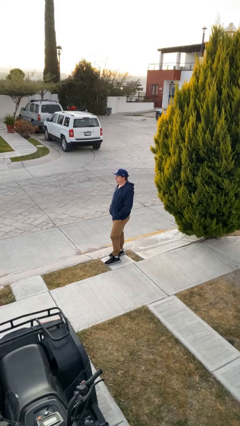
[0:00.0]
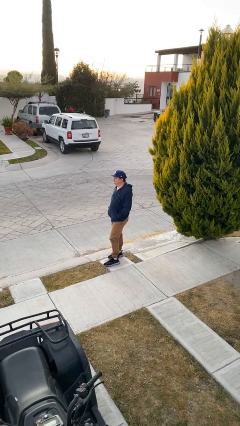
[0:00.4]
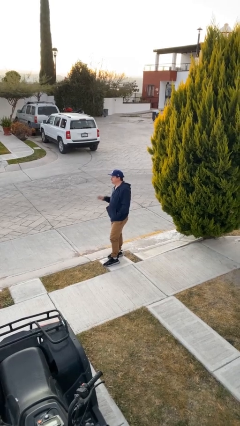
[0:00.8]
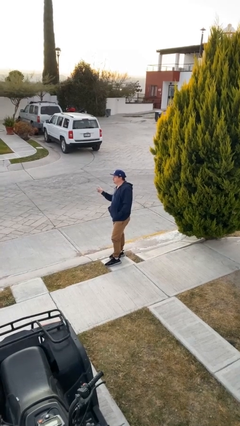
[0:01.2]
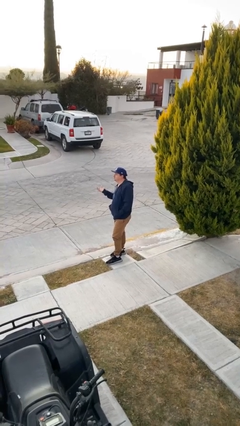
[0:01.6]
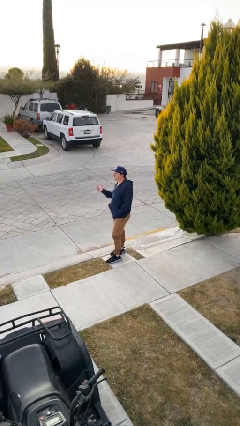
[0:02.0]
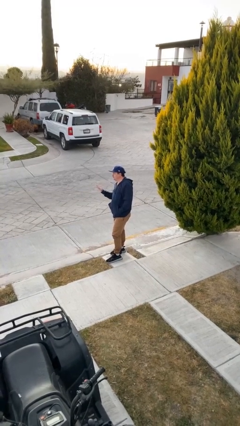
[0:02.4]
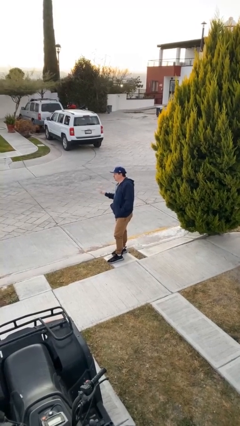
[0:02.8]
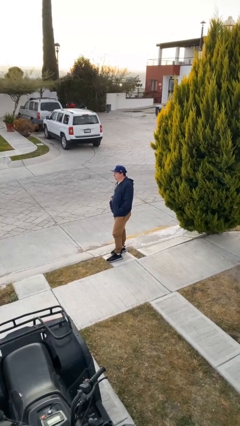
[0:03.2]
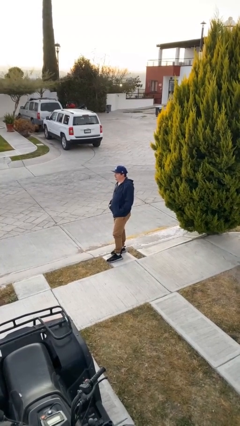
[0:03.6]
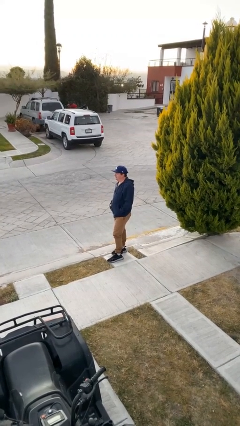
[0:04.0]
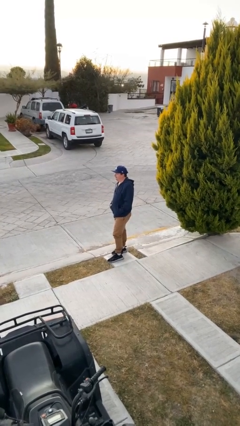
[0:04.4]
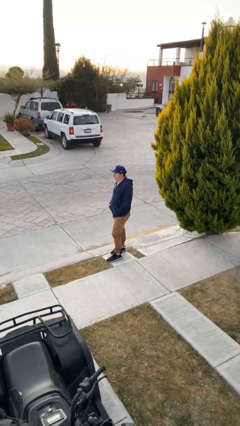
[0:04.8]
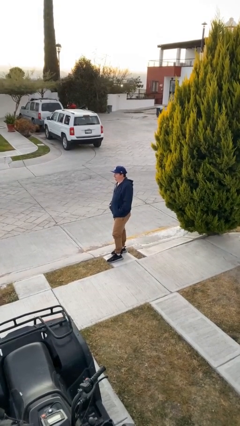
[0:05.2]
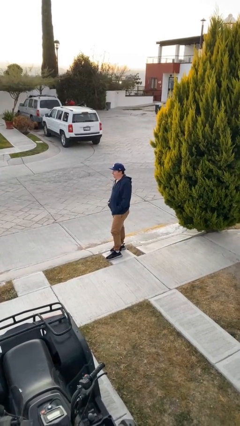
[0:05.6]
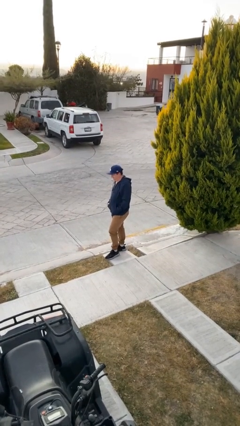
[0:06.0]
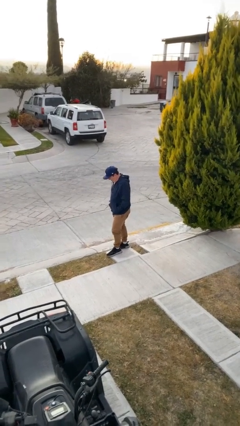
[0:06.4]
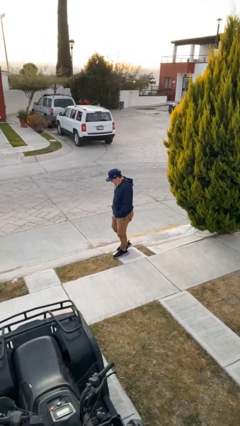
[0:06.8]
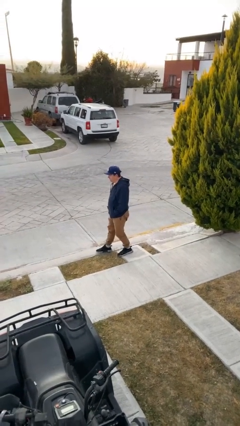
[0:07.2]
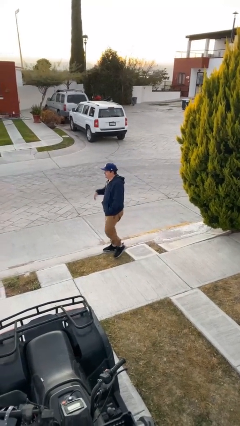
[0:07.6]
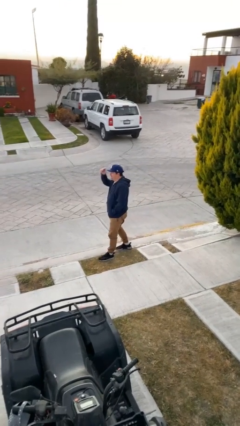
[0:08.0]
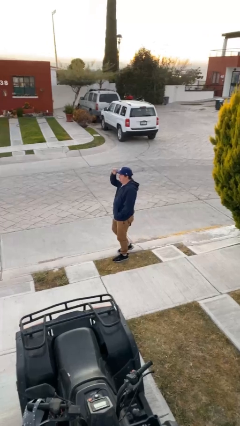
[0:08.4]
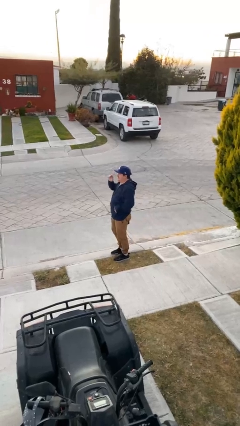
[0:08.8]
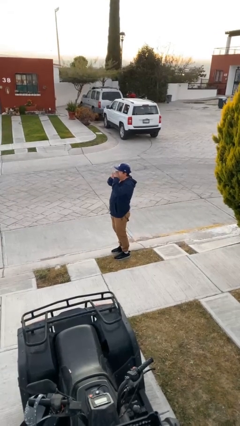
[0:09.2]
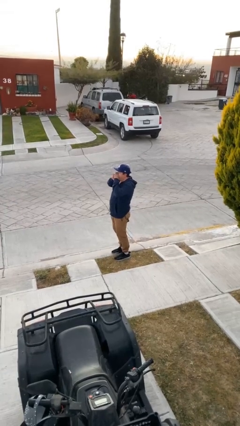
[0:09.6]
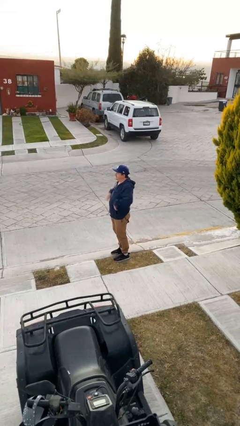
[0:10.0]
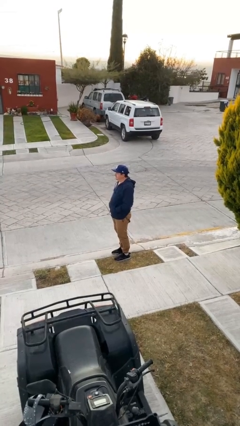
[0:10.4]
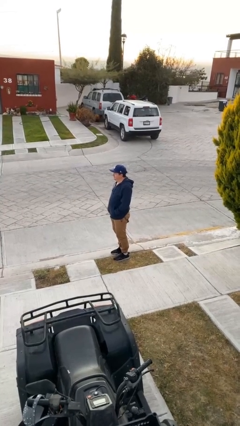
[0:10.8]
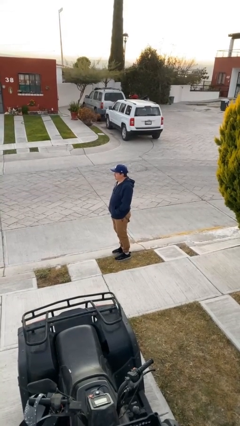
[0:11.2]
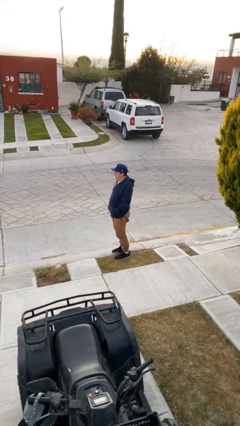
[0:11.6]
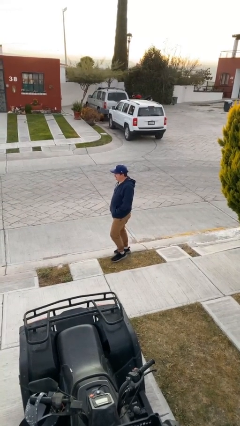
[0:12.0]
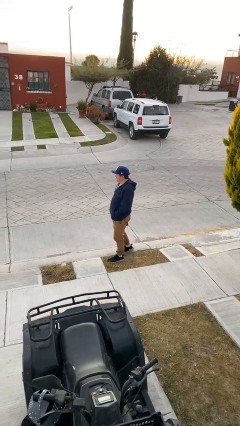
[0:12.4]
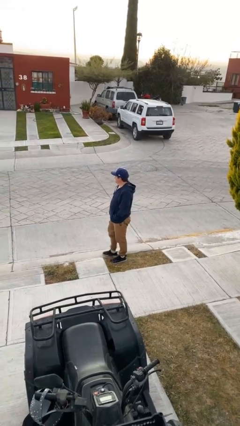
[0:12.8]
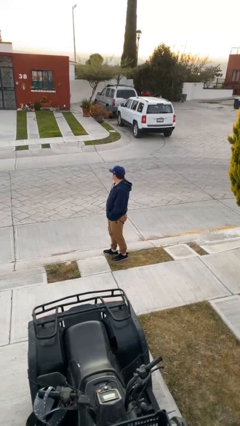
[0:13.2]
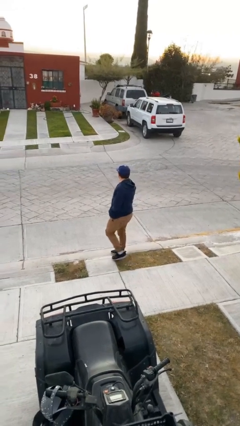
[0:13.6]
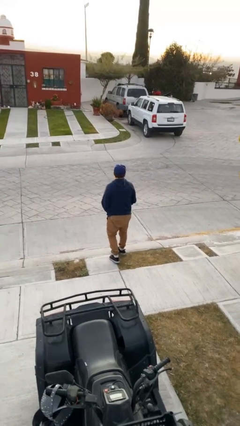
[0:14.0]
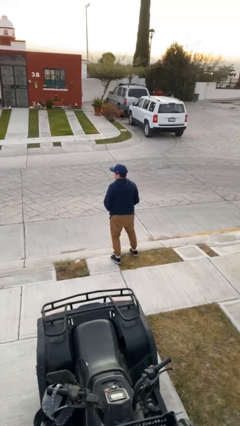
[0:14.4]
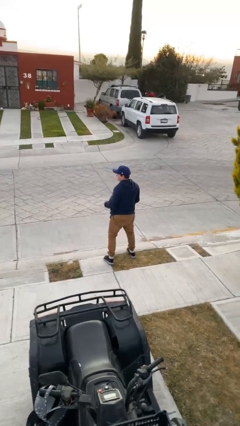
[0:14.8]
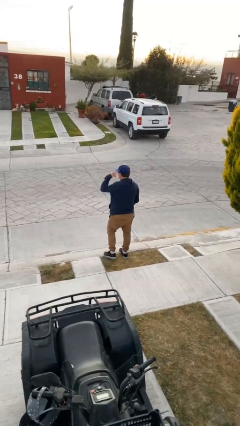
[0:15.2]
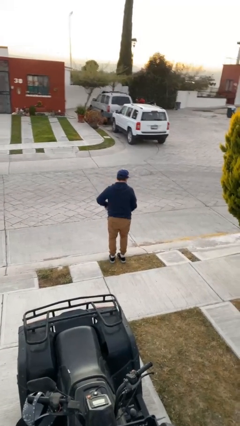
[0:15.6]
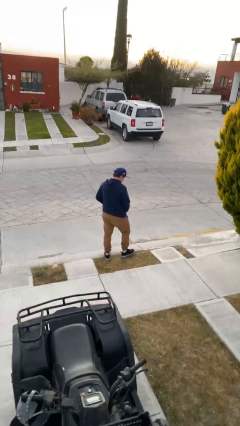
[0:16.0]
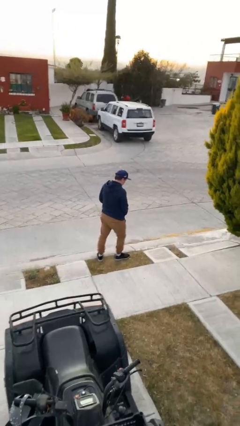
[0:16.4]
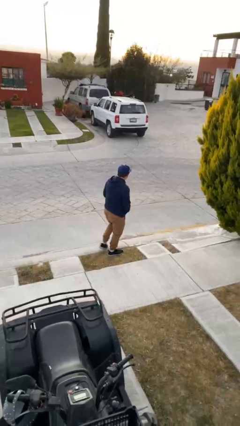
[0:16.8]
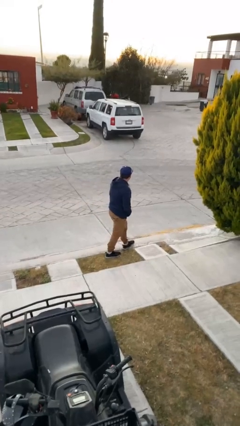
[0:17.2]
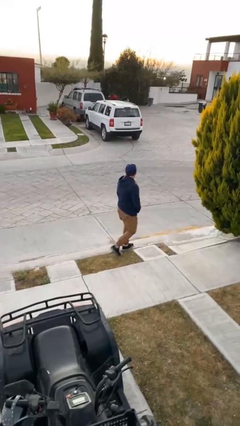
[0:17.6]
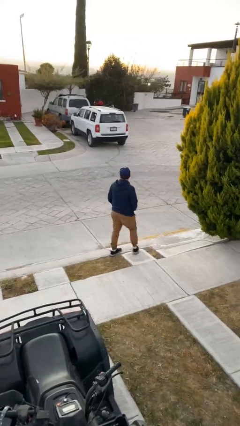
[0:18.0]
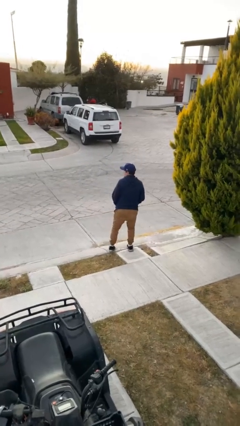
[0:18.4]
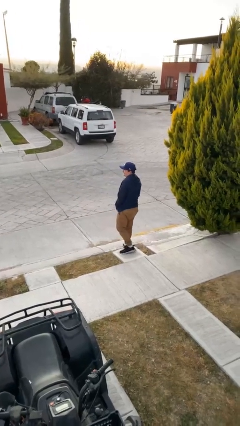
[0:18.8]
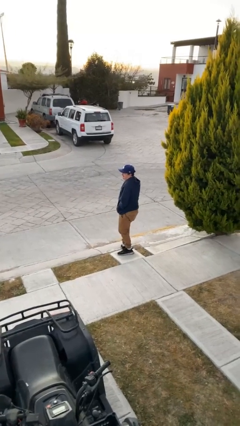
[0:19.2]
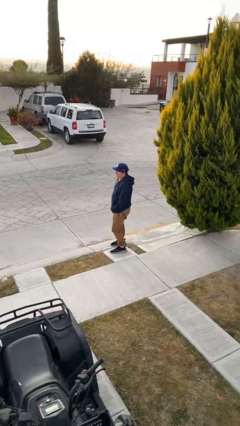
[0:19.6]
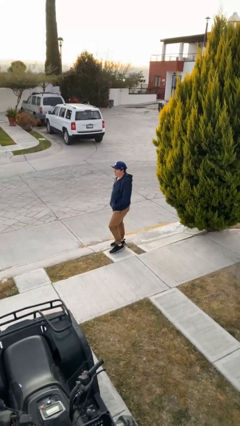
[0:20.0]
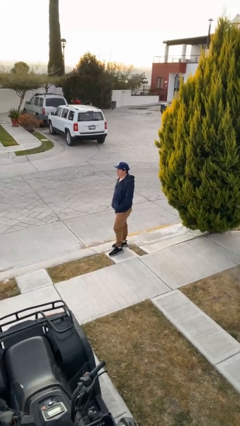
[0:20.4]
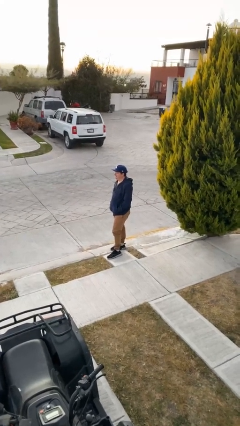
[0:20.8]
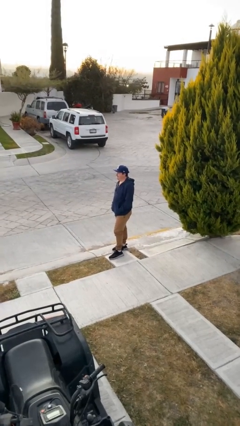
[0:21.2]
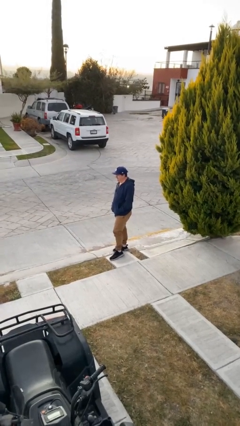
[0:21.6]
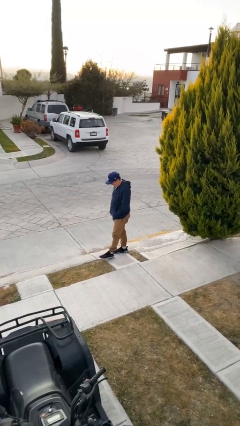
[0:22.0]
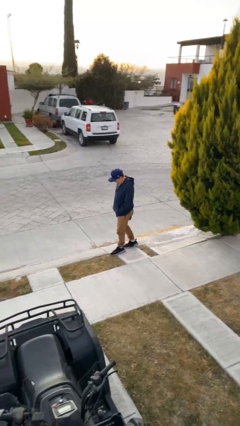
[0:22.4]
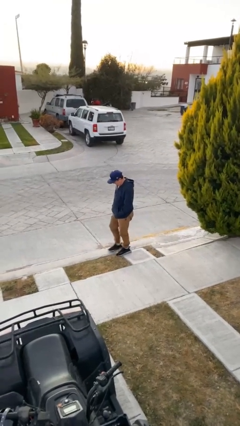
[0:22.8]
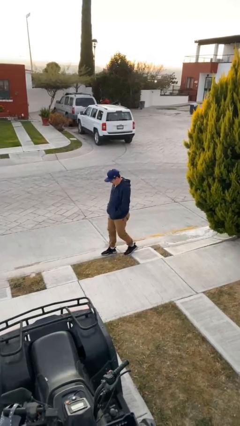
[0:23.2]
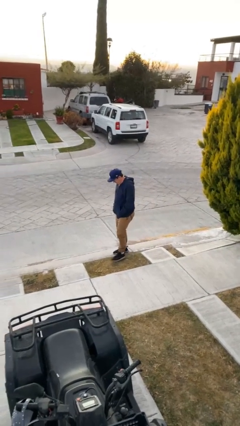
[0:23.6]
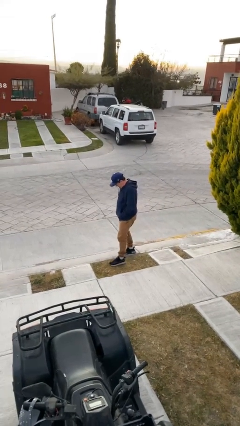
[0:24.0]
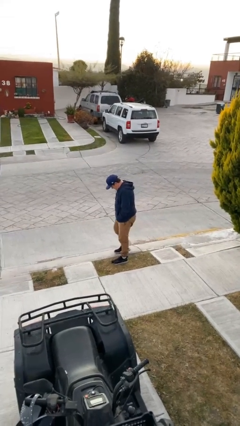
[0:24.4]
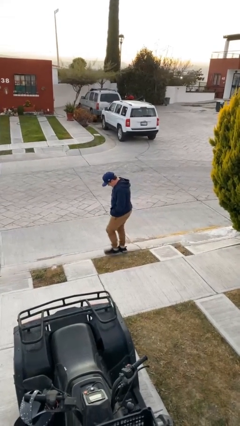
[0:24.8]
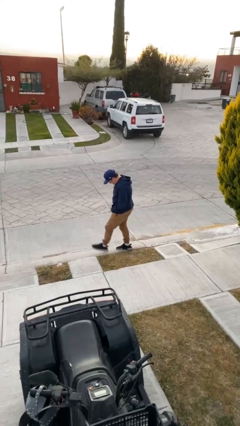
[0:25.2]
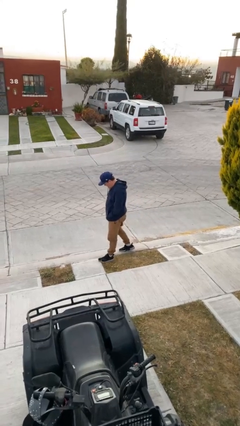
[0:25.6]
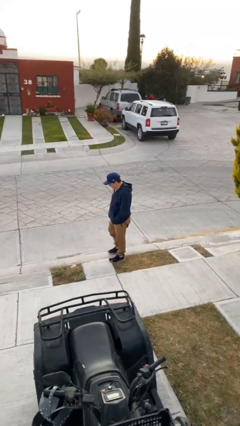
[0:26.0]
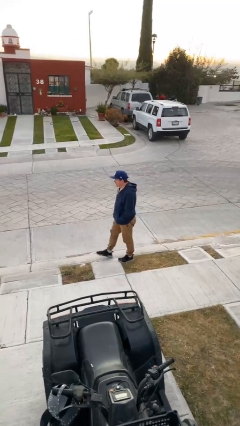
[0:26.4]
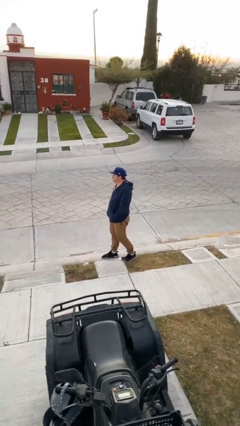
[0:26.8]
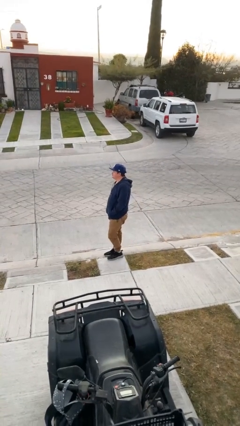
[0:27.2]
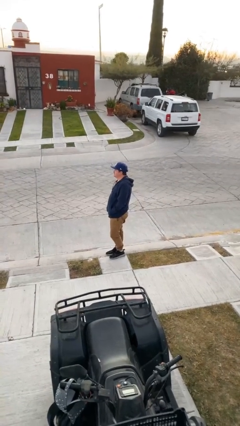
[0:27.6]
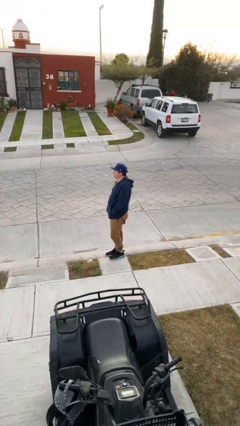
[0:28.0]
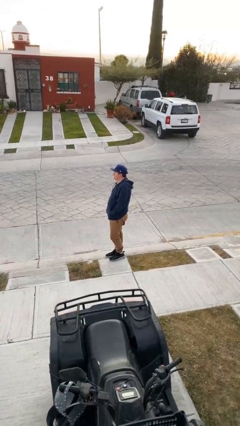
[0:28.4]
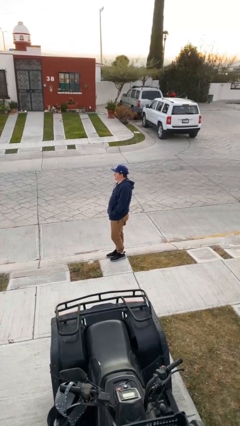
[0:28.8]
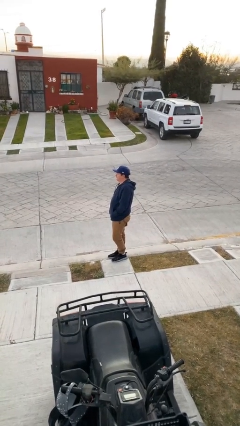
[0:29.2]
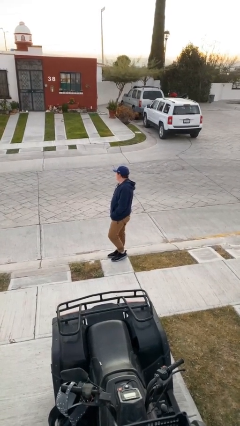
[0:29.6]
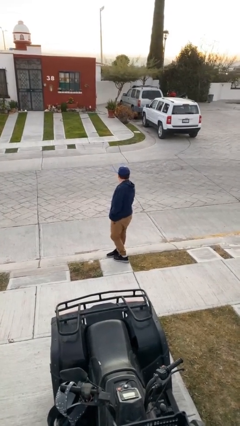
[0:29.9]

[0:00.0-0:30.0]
person walks

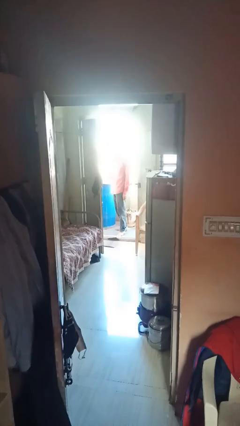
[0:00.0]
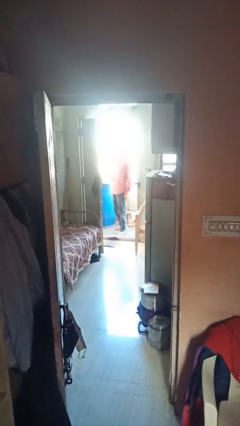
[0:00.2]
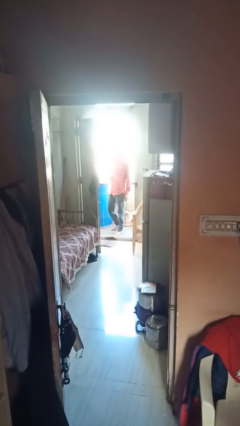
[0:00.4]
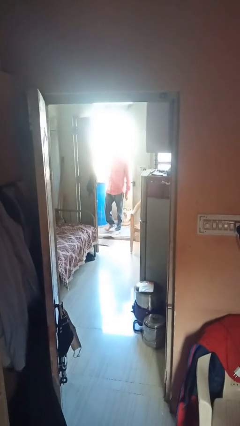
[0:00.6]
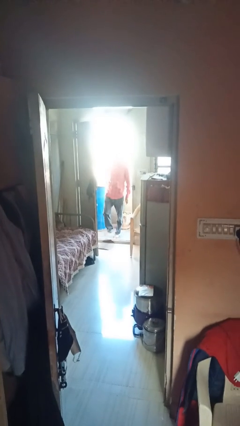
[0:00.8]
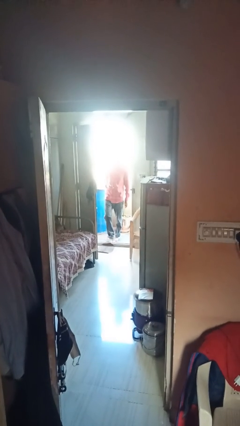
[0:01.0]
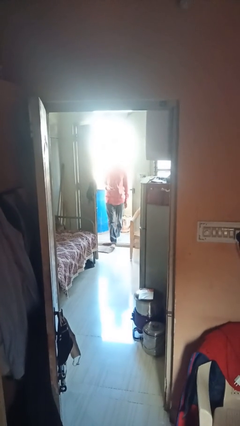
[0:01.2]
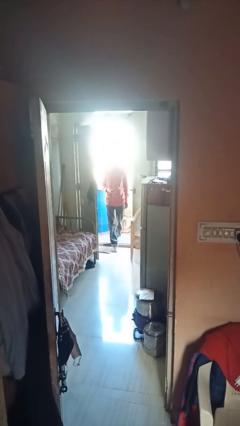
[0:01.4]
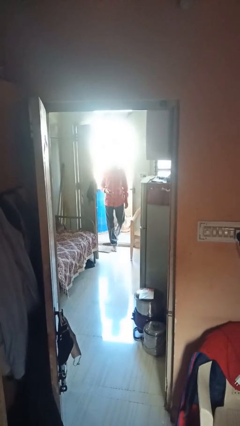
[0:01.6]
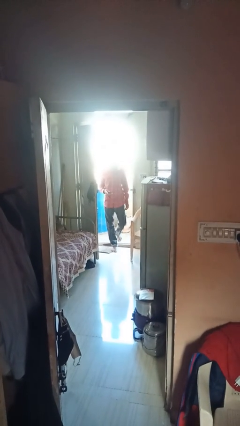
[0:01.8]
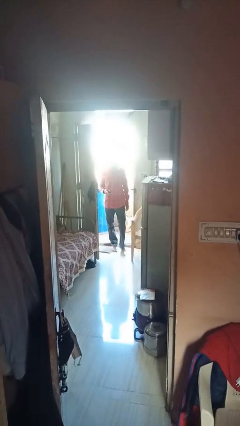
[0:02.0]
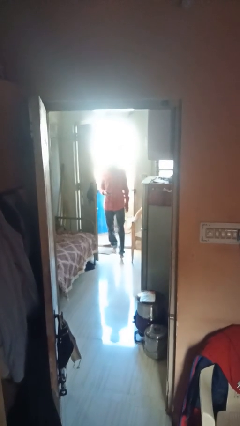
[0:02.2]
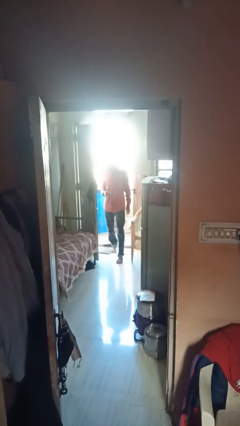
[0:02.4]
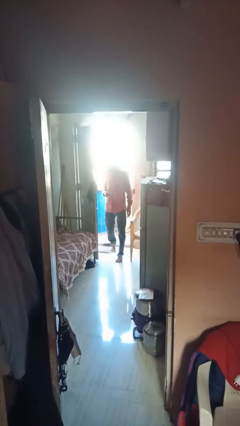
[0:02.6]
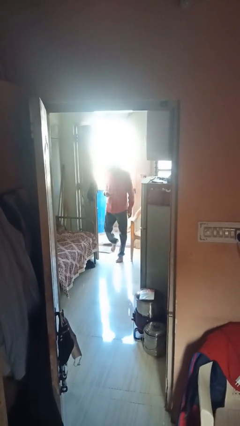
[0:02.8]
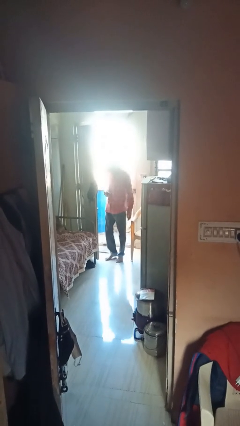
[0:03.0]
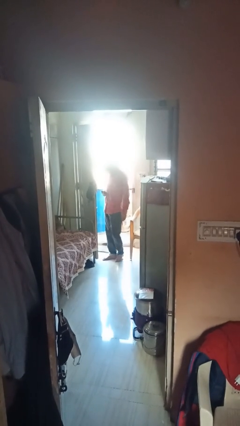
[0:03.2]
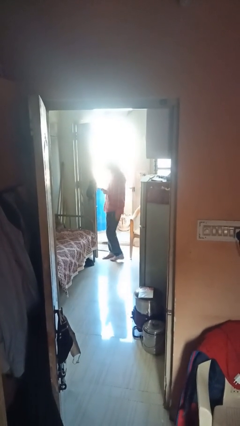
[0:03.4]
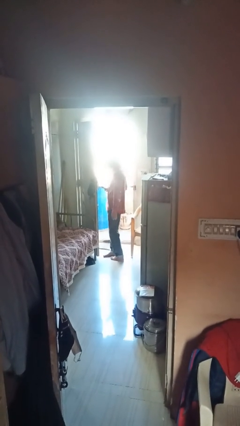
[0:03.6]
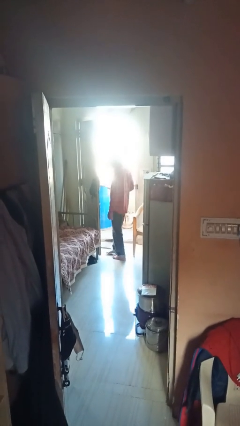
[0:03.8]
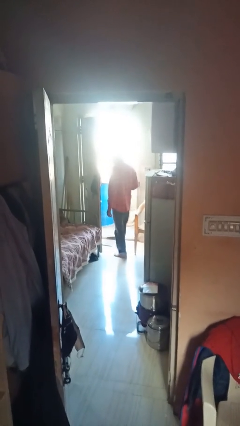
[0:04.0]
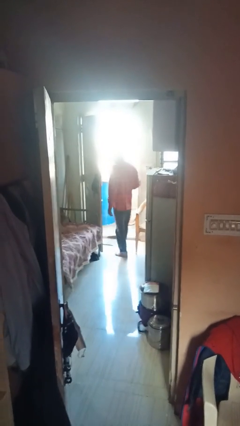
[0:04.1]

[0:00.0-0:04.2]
person enters scene through structure
